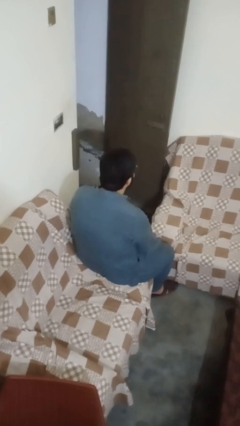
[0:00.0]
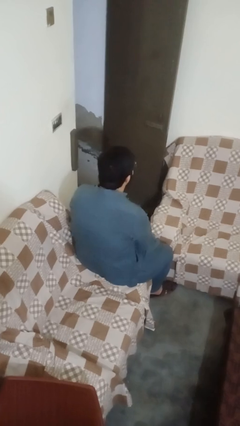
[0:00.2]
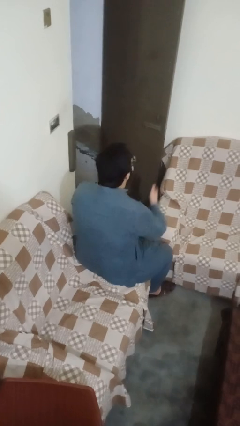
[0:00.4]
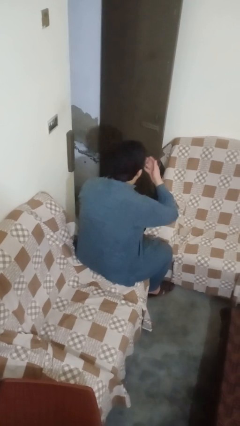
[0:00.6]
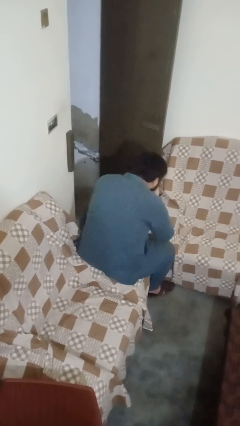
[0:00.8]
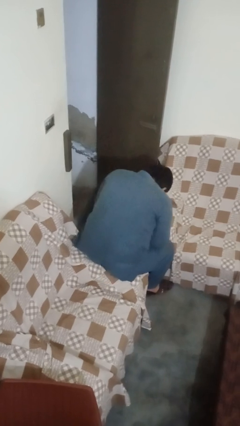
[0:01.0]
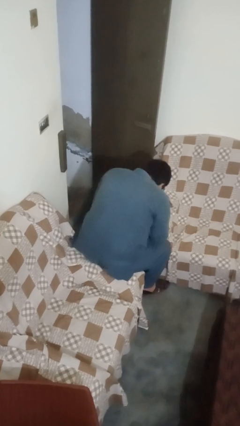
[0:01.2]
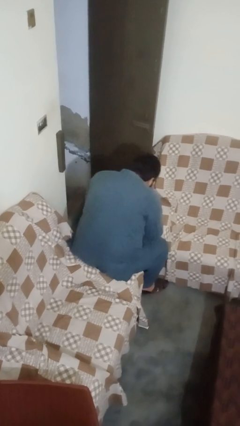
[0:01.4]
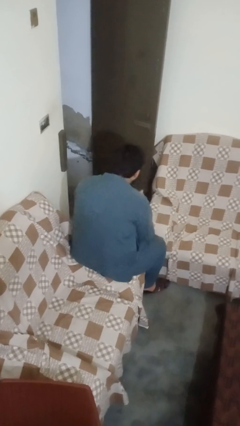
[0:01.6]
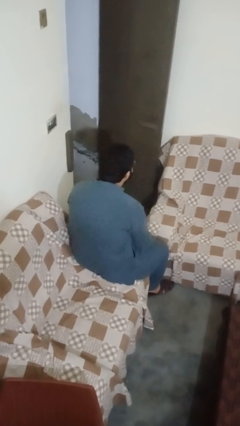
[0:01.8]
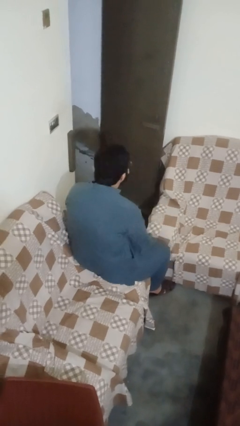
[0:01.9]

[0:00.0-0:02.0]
person sneezes into hand

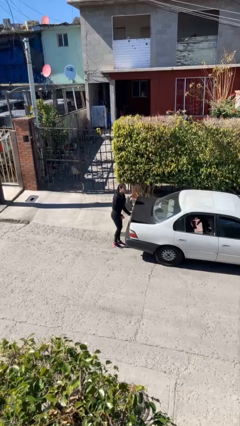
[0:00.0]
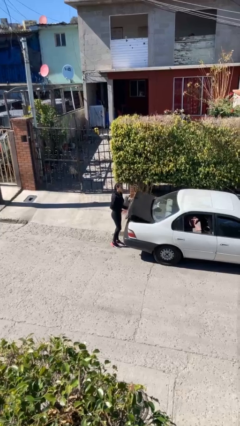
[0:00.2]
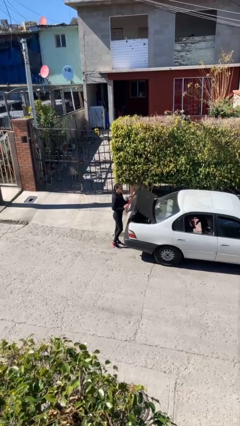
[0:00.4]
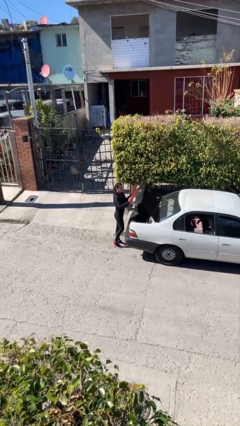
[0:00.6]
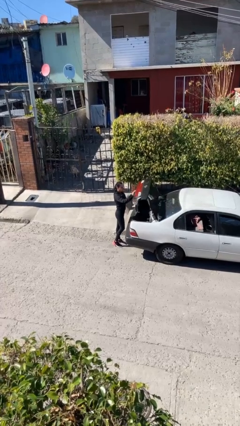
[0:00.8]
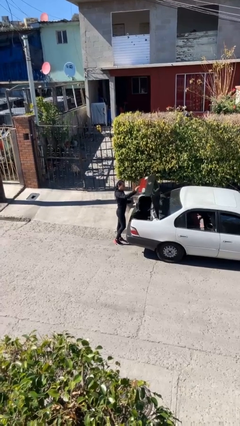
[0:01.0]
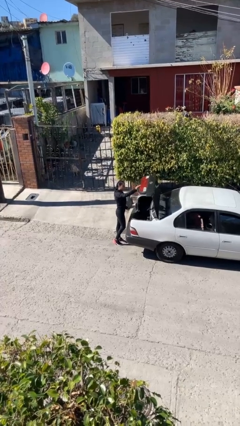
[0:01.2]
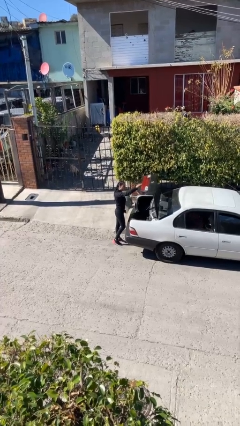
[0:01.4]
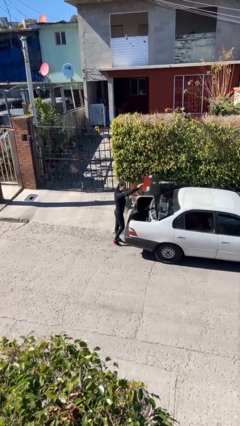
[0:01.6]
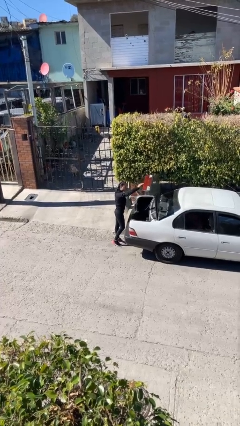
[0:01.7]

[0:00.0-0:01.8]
person opens car trunk

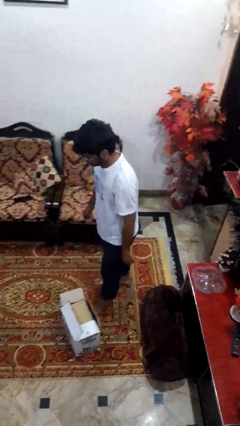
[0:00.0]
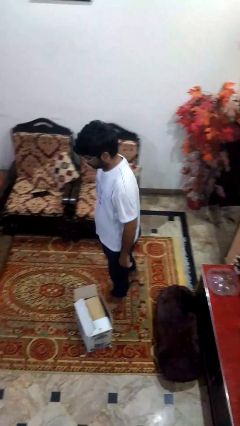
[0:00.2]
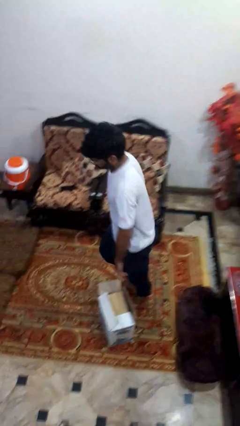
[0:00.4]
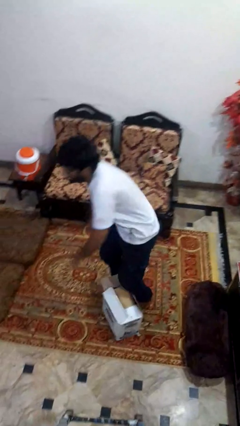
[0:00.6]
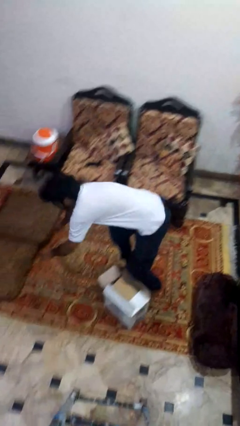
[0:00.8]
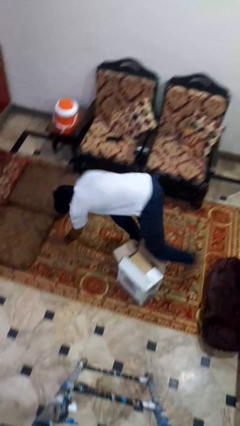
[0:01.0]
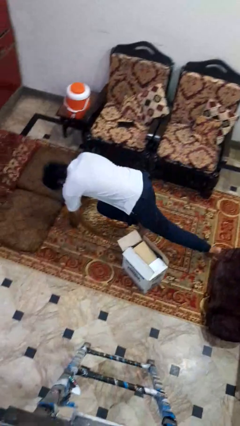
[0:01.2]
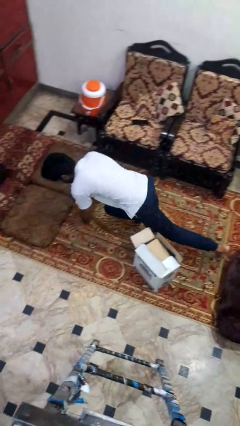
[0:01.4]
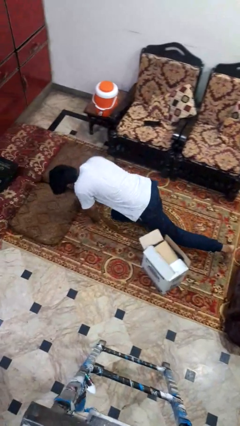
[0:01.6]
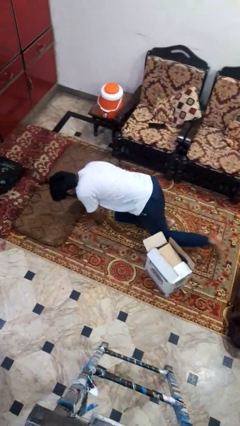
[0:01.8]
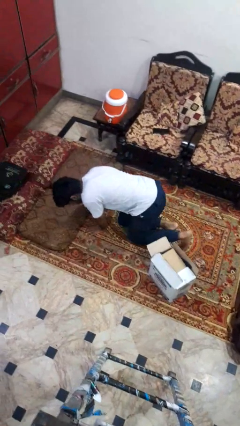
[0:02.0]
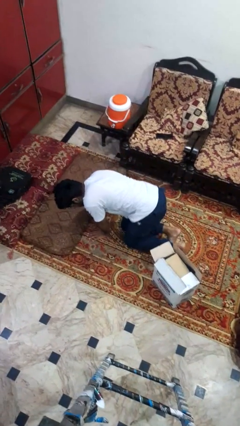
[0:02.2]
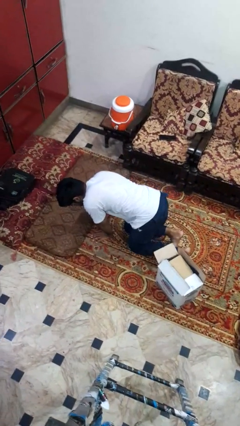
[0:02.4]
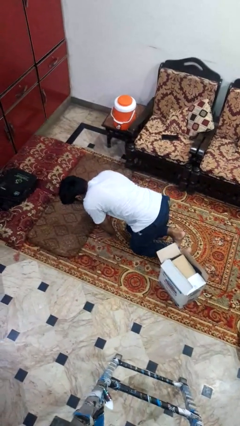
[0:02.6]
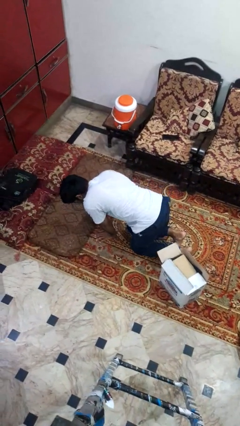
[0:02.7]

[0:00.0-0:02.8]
person trips on object on floor

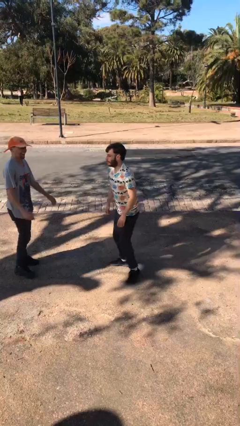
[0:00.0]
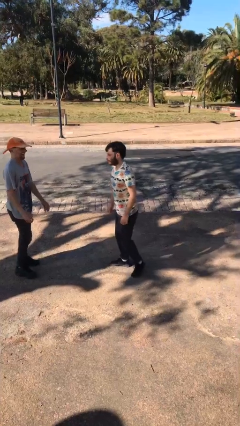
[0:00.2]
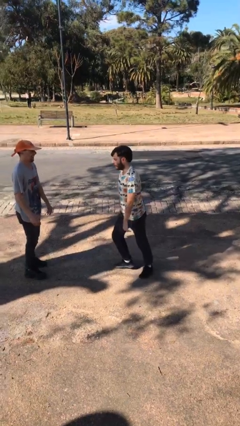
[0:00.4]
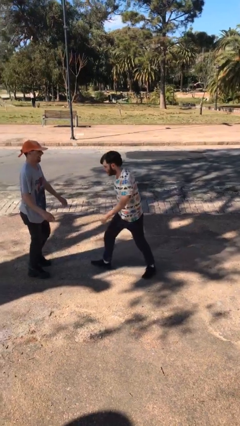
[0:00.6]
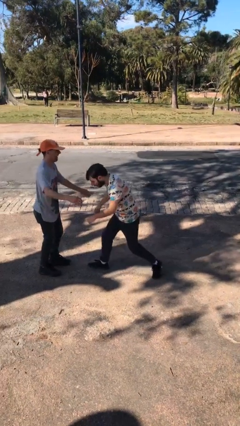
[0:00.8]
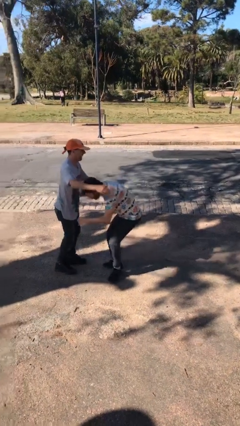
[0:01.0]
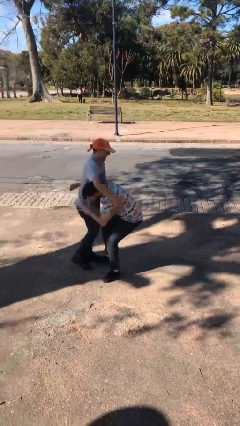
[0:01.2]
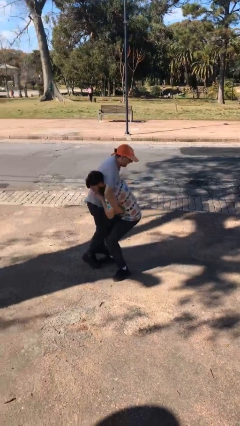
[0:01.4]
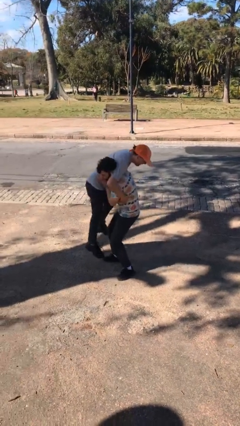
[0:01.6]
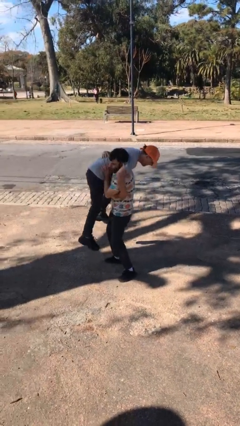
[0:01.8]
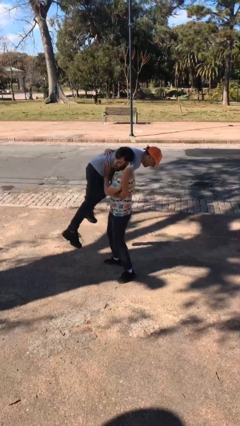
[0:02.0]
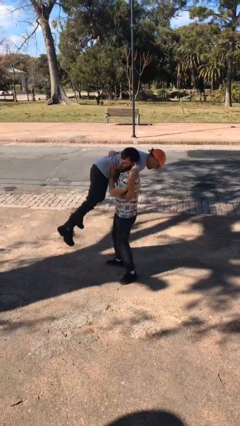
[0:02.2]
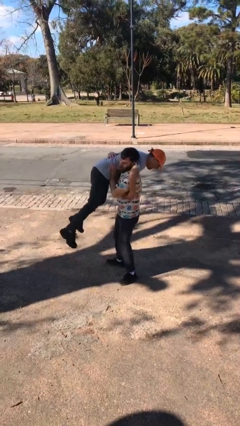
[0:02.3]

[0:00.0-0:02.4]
person carries person over shoulder

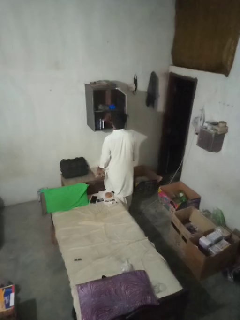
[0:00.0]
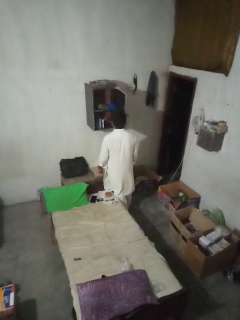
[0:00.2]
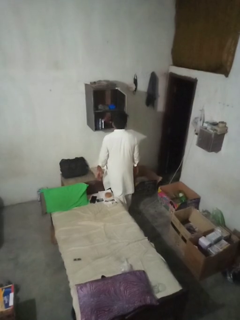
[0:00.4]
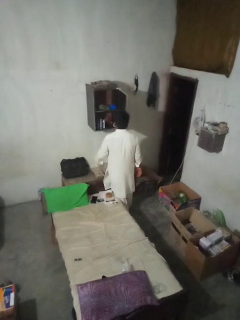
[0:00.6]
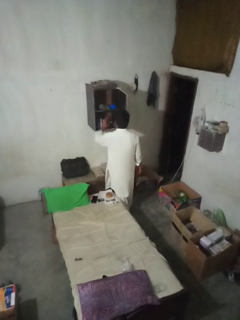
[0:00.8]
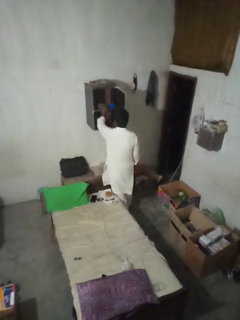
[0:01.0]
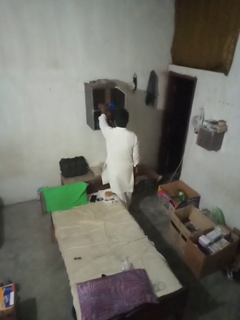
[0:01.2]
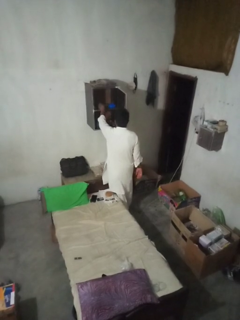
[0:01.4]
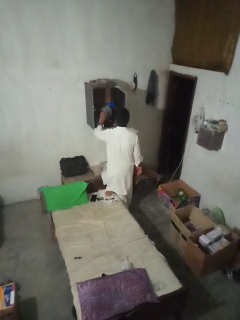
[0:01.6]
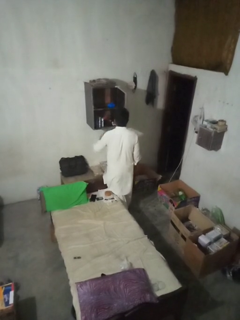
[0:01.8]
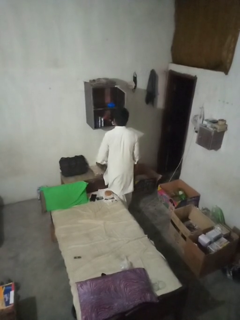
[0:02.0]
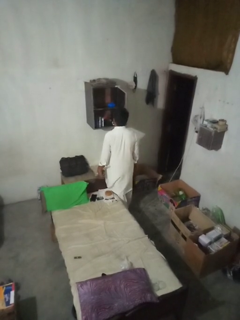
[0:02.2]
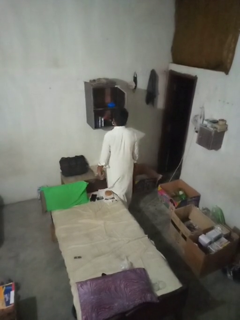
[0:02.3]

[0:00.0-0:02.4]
person takes clothes from dresser

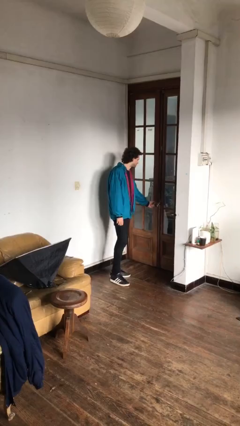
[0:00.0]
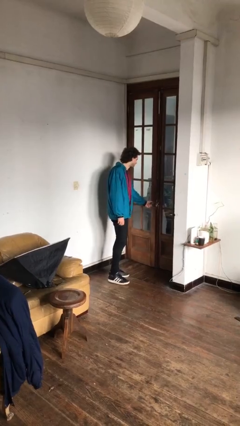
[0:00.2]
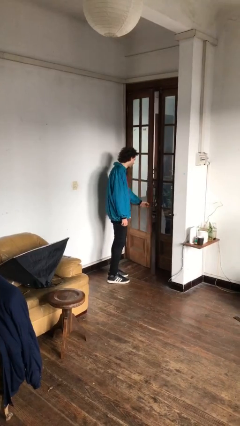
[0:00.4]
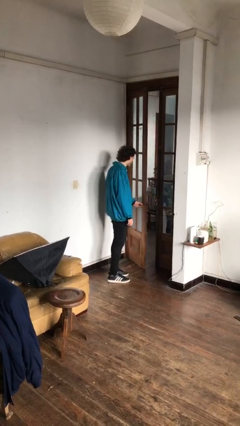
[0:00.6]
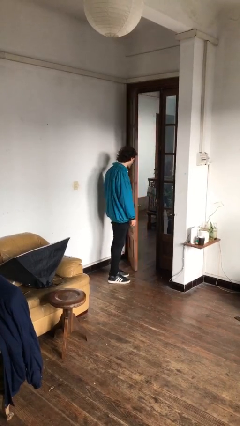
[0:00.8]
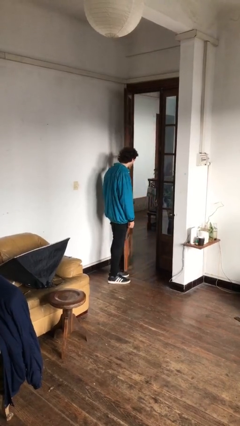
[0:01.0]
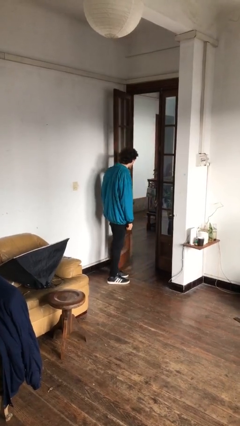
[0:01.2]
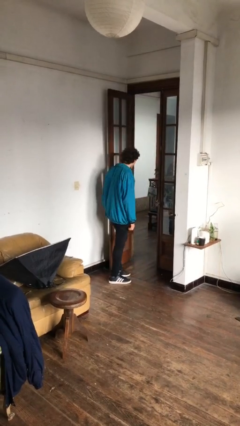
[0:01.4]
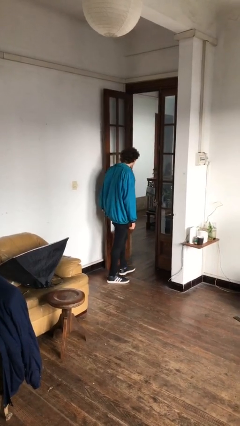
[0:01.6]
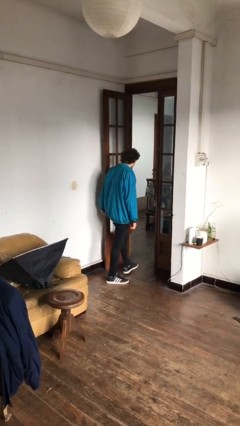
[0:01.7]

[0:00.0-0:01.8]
person opens facility door

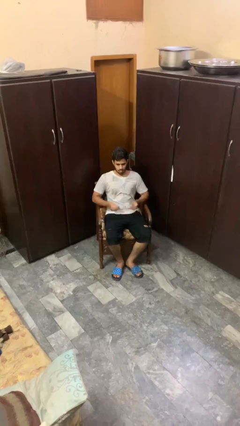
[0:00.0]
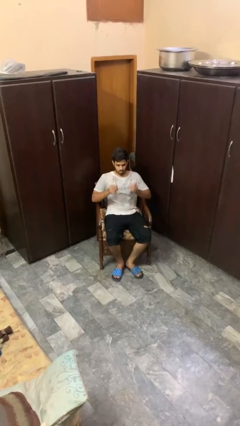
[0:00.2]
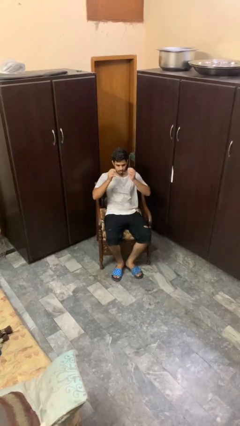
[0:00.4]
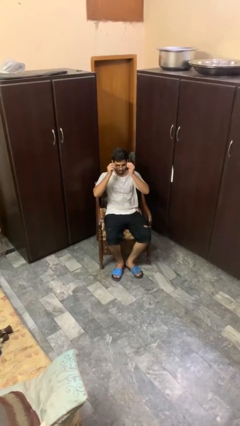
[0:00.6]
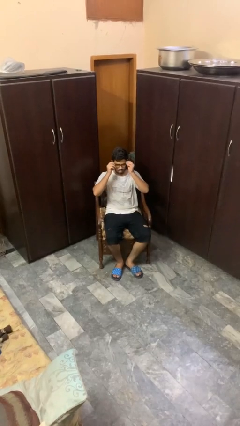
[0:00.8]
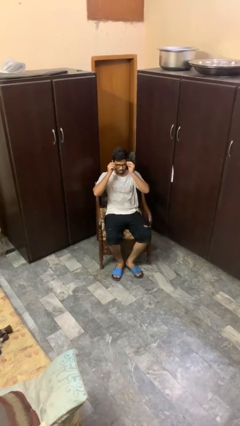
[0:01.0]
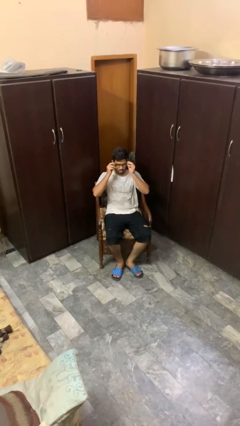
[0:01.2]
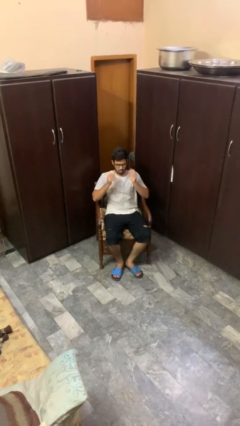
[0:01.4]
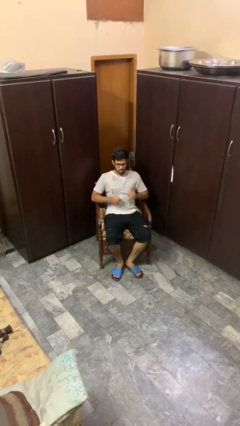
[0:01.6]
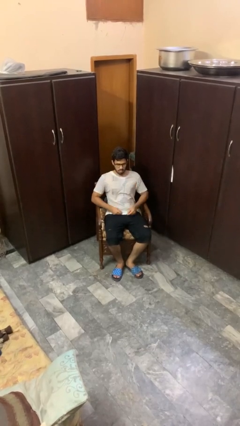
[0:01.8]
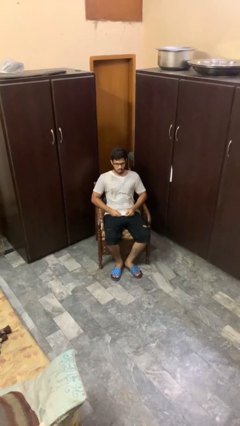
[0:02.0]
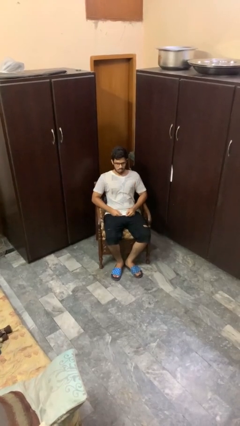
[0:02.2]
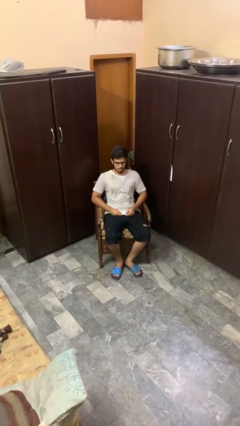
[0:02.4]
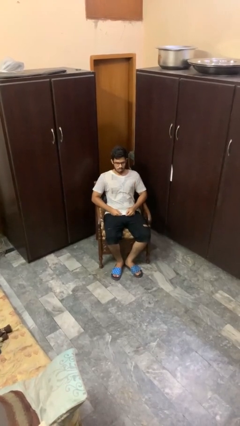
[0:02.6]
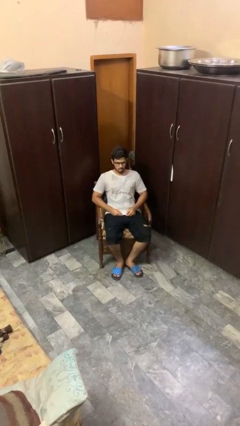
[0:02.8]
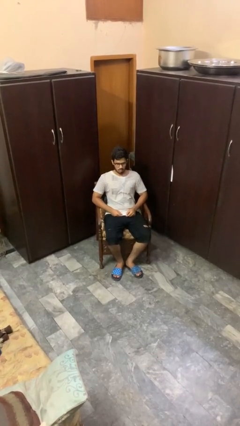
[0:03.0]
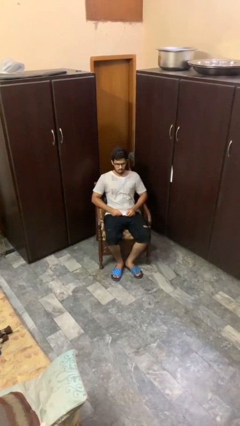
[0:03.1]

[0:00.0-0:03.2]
person puts on glasses

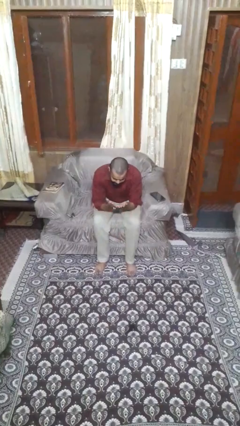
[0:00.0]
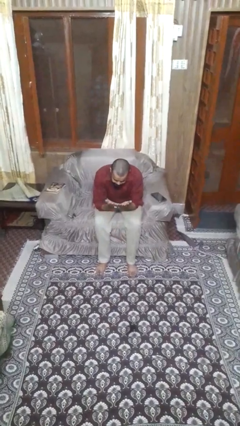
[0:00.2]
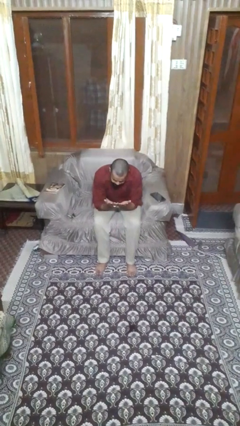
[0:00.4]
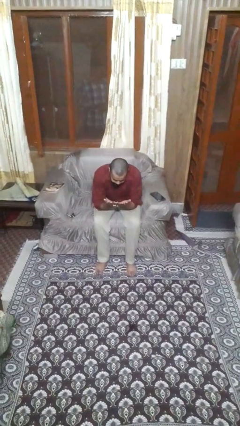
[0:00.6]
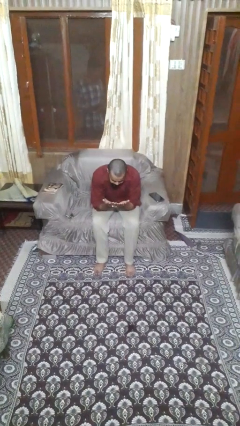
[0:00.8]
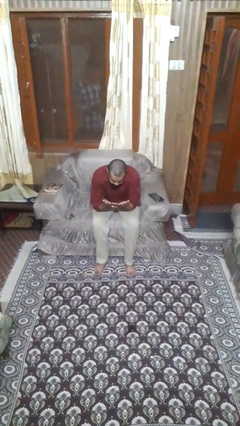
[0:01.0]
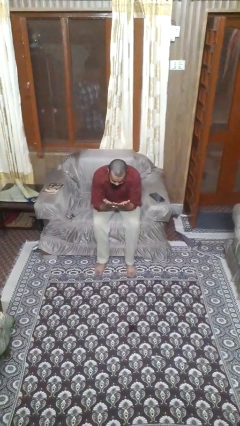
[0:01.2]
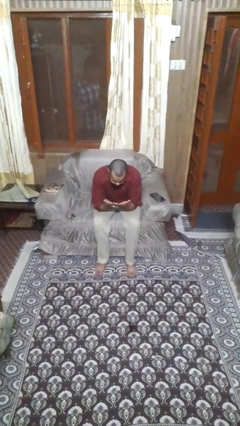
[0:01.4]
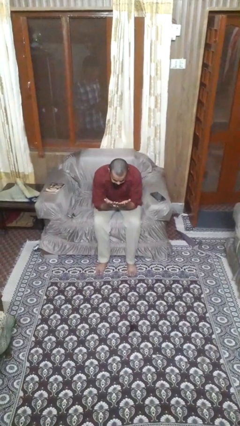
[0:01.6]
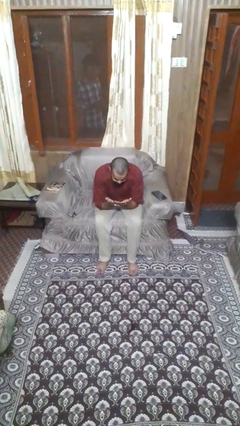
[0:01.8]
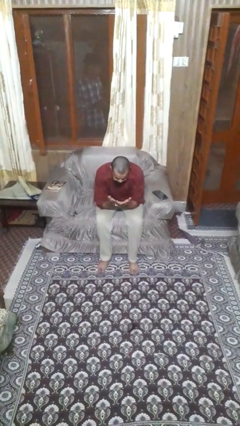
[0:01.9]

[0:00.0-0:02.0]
person looks at hands in lap
